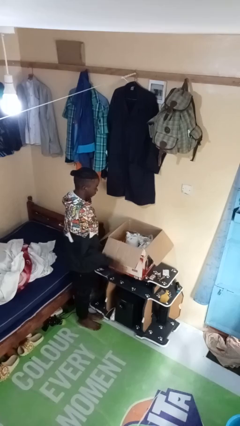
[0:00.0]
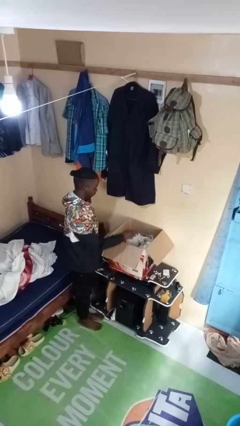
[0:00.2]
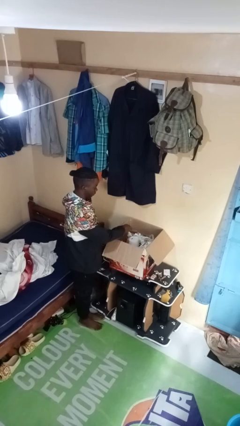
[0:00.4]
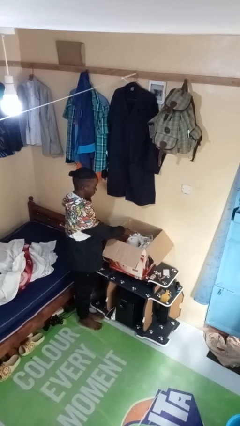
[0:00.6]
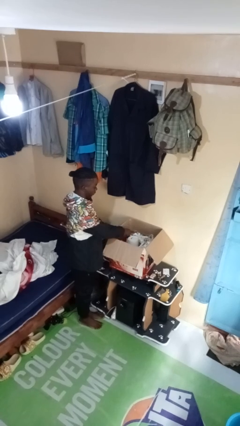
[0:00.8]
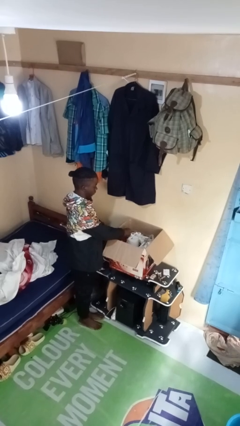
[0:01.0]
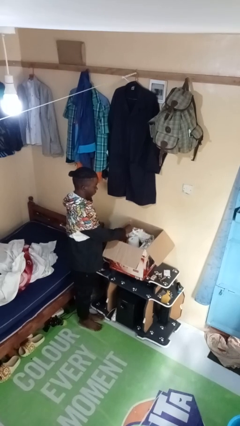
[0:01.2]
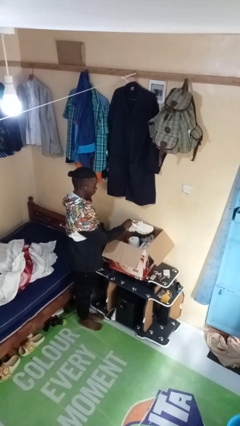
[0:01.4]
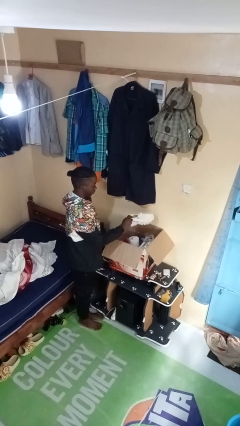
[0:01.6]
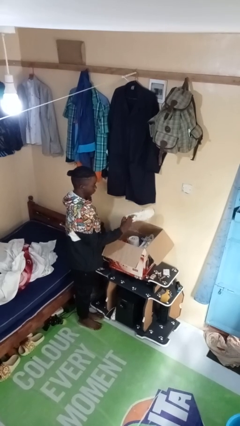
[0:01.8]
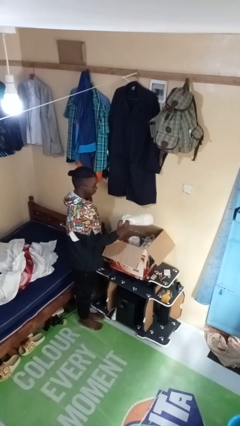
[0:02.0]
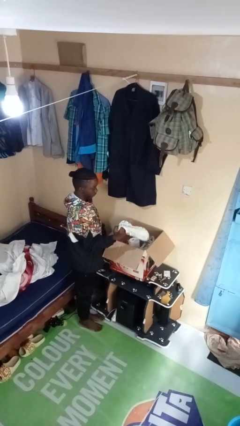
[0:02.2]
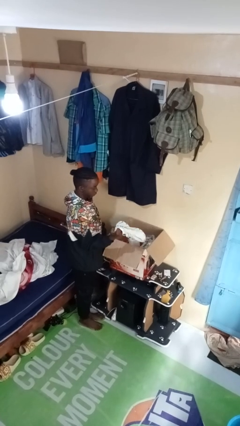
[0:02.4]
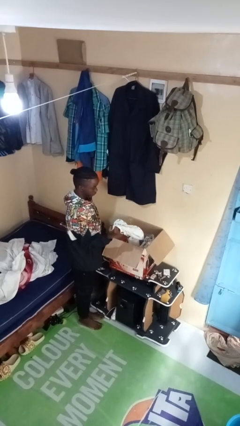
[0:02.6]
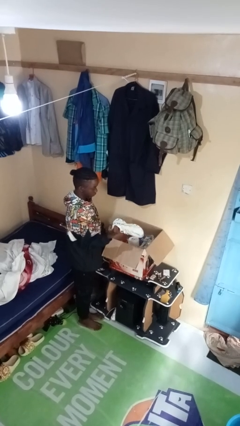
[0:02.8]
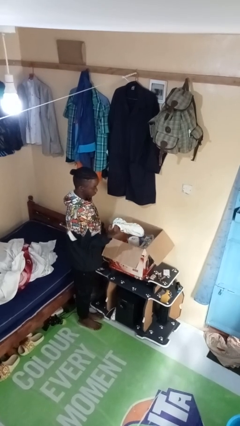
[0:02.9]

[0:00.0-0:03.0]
person takes object from box

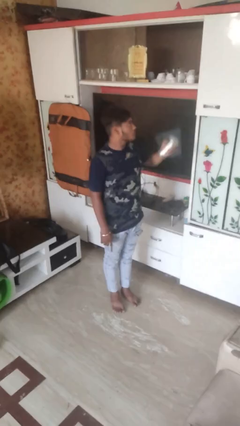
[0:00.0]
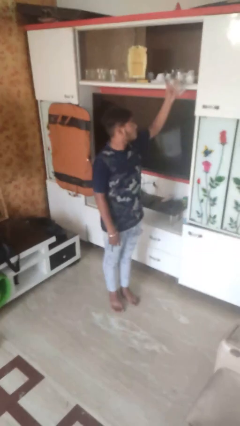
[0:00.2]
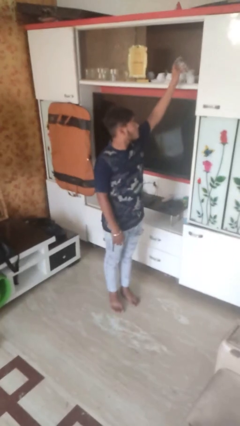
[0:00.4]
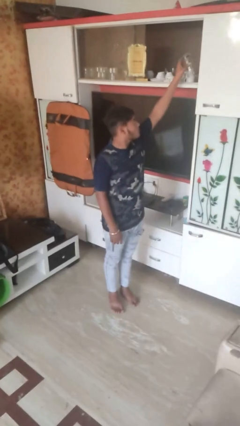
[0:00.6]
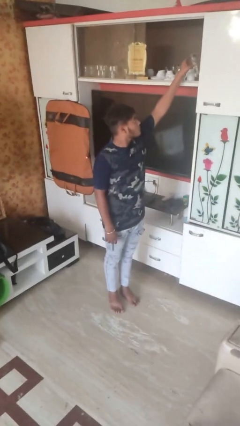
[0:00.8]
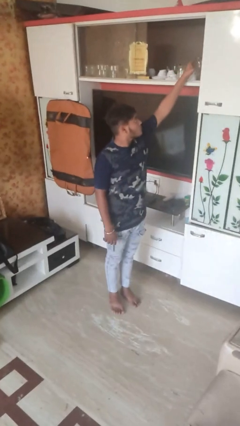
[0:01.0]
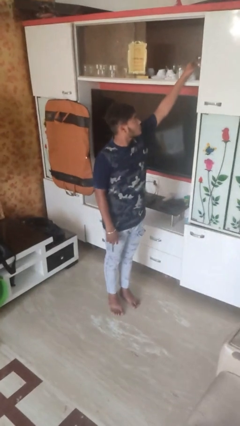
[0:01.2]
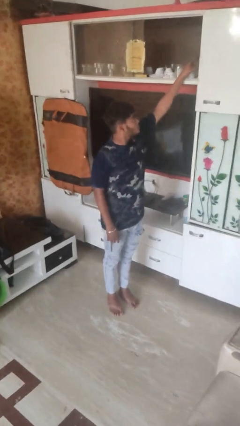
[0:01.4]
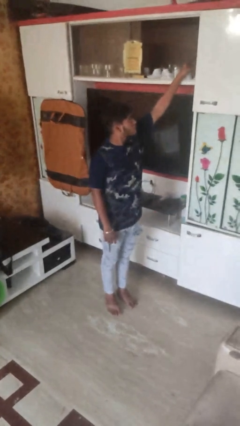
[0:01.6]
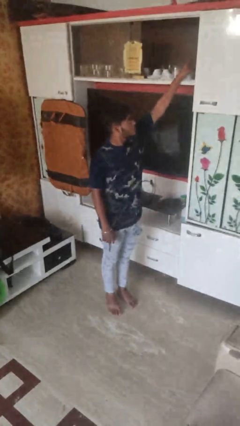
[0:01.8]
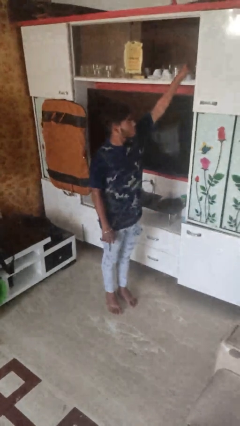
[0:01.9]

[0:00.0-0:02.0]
person puts object in cabinet

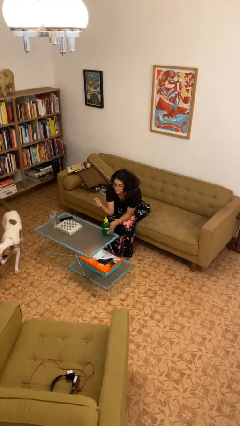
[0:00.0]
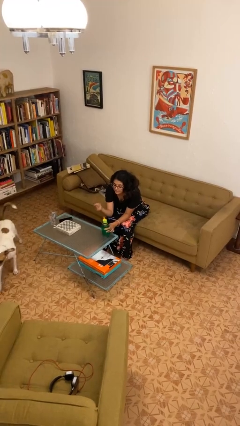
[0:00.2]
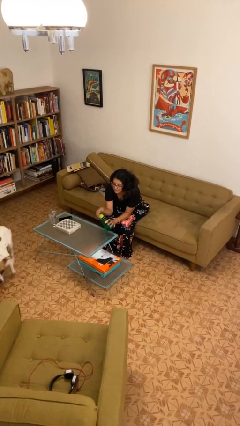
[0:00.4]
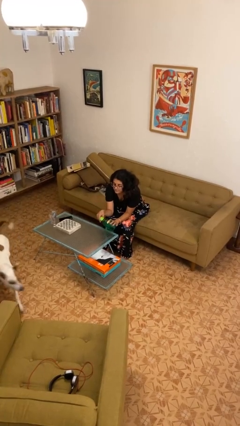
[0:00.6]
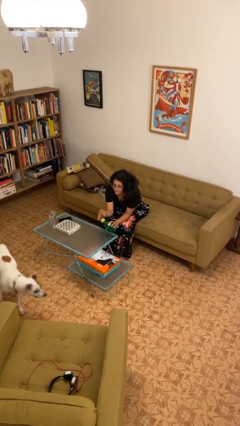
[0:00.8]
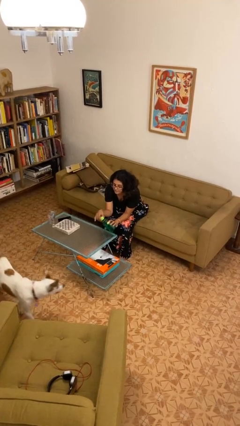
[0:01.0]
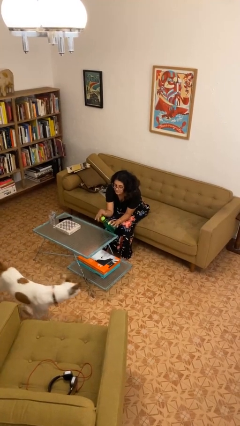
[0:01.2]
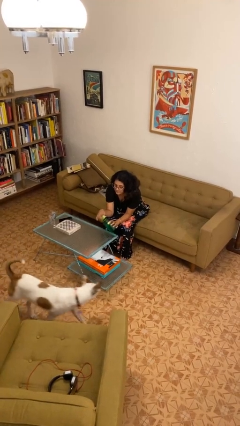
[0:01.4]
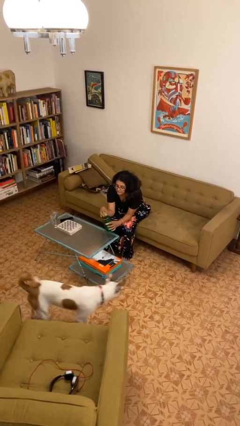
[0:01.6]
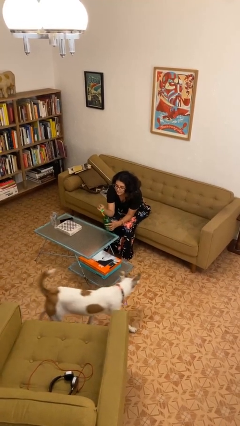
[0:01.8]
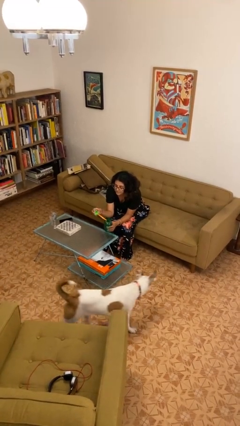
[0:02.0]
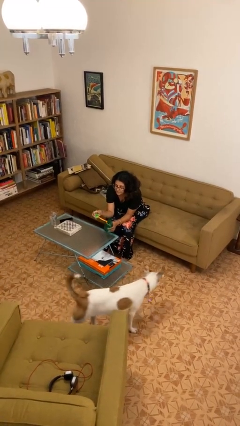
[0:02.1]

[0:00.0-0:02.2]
person unscrews lid from bottle

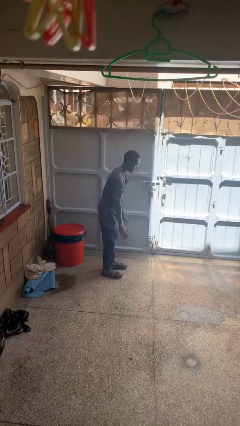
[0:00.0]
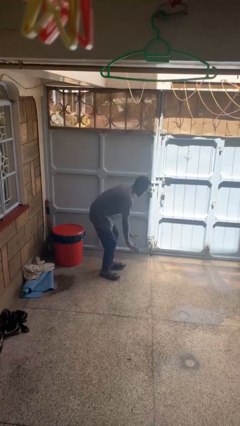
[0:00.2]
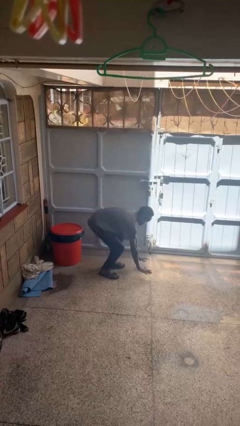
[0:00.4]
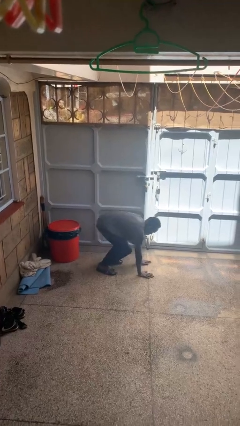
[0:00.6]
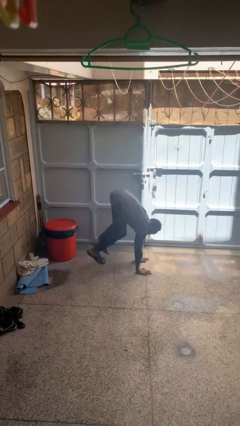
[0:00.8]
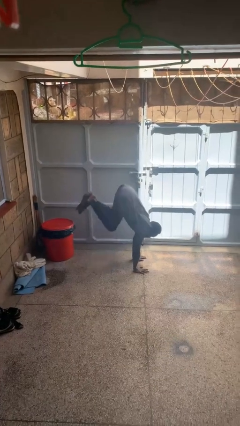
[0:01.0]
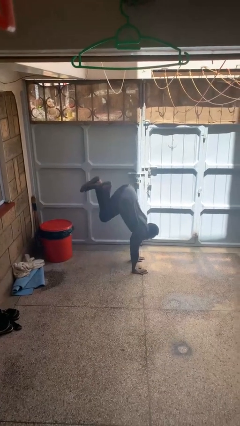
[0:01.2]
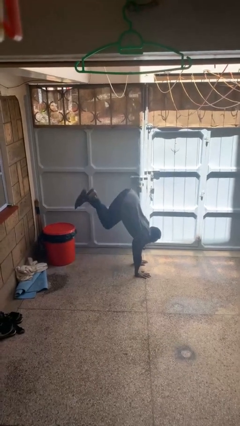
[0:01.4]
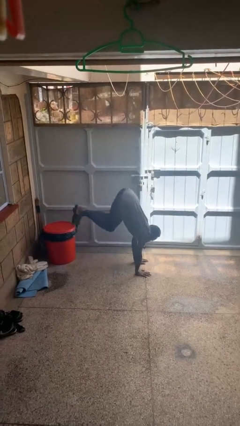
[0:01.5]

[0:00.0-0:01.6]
person handstand

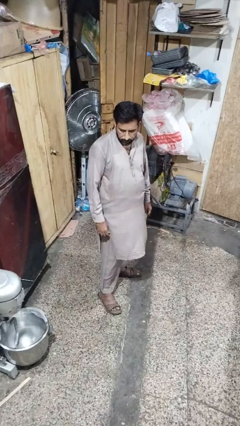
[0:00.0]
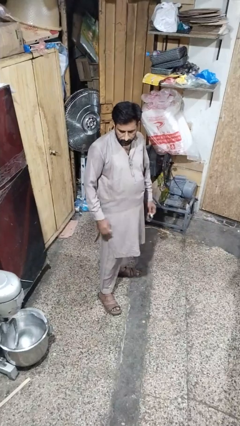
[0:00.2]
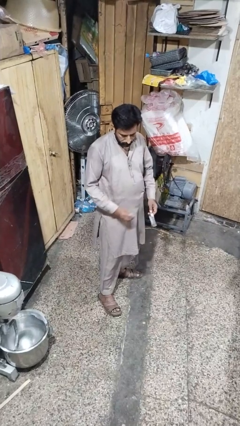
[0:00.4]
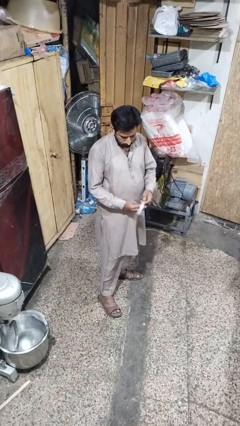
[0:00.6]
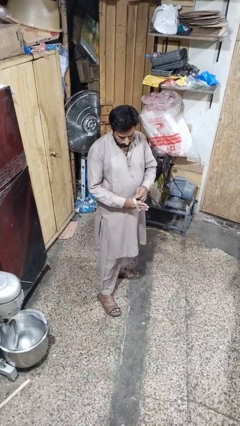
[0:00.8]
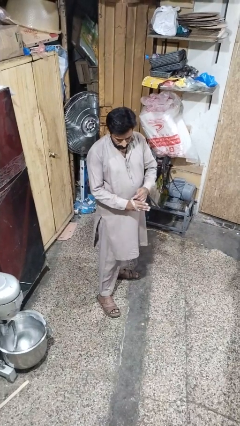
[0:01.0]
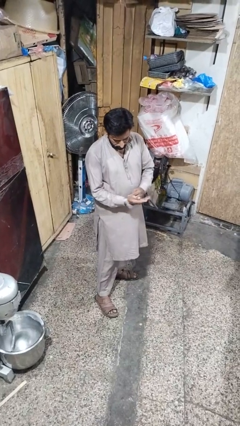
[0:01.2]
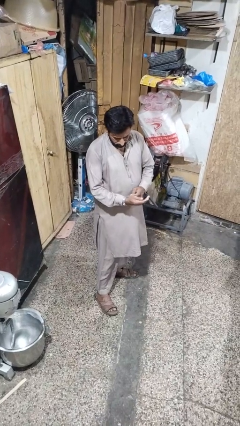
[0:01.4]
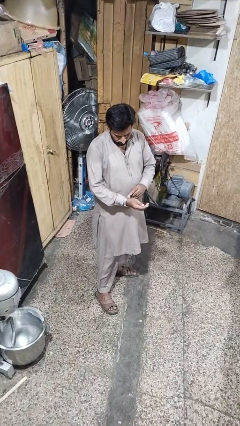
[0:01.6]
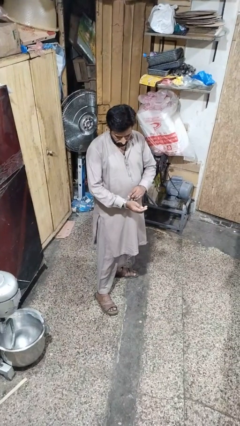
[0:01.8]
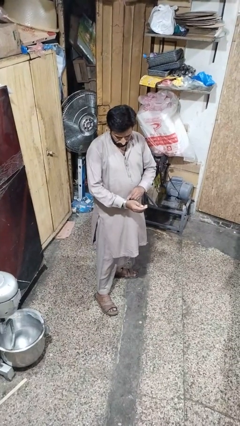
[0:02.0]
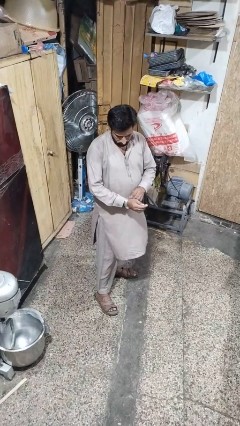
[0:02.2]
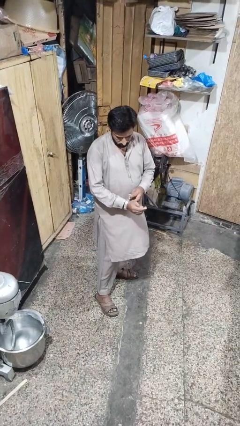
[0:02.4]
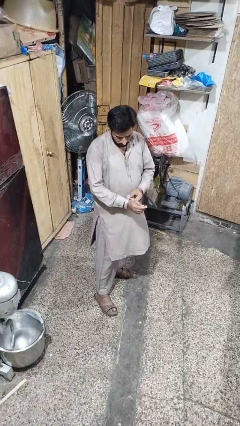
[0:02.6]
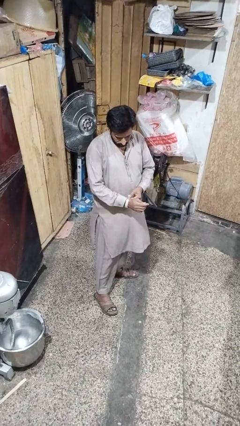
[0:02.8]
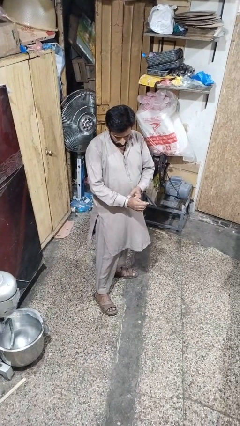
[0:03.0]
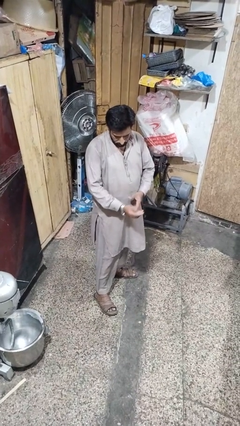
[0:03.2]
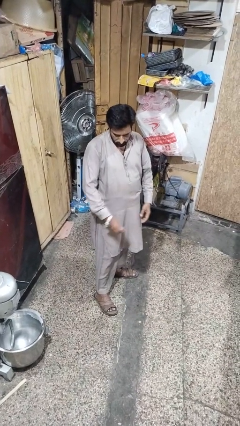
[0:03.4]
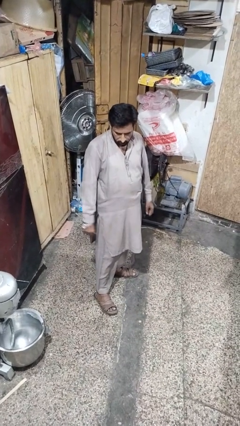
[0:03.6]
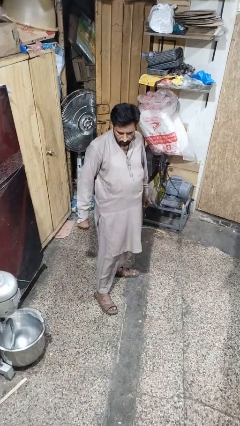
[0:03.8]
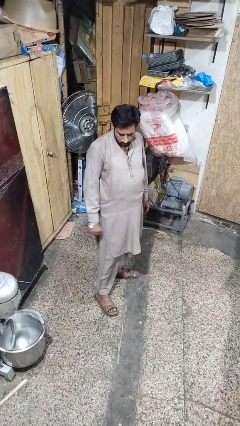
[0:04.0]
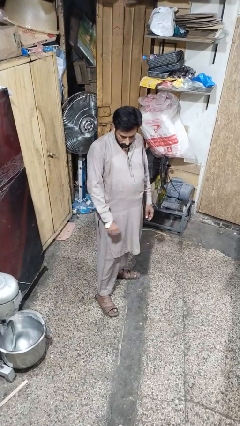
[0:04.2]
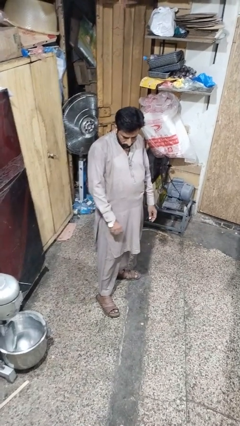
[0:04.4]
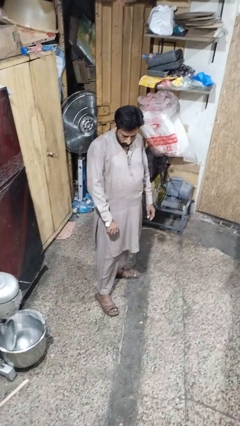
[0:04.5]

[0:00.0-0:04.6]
person puts on wristwatch

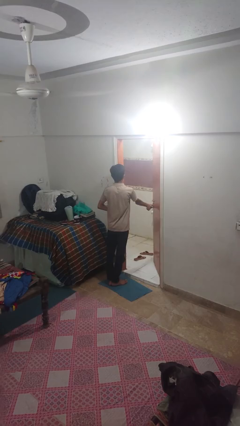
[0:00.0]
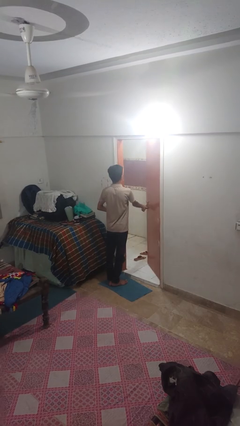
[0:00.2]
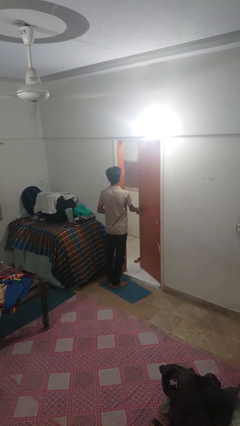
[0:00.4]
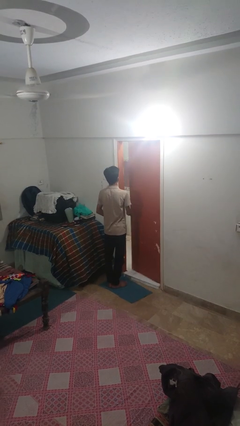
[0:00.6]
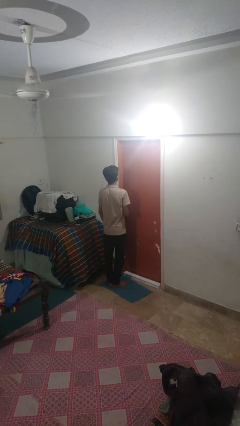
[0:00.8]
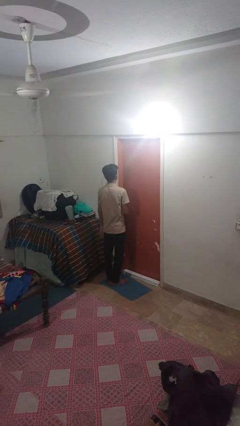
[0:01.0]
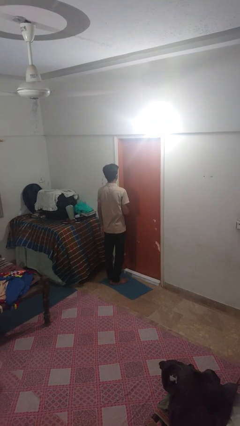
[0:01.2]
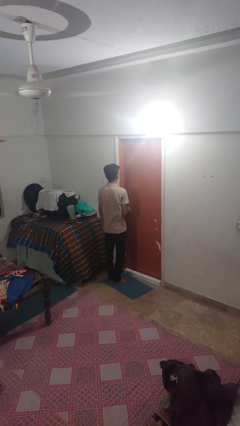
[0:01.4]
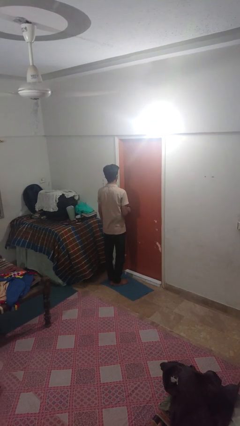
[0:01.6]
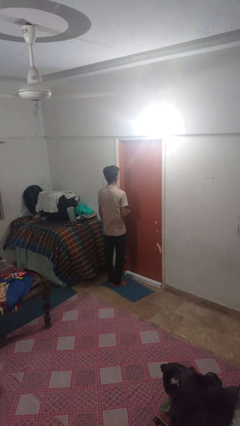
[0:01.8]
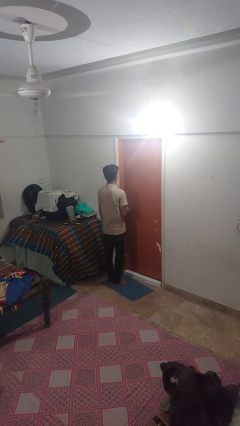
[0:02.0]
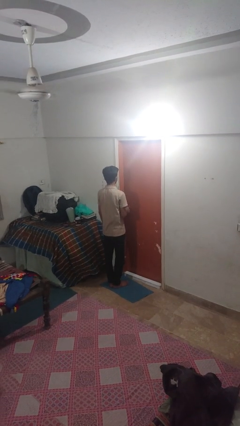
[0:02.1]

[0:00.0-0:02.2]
person closes facility door

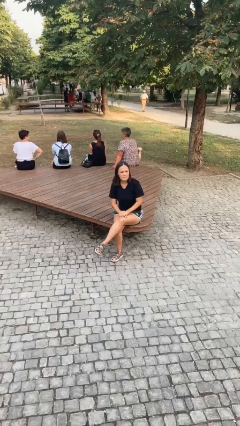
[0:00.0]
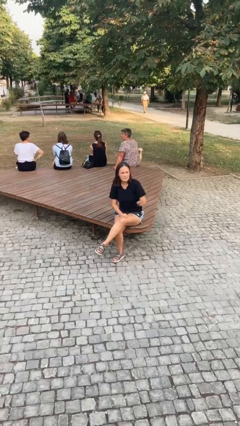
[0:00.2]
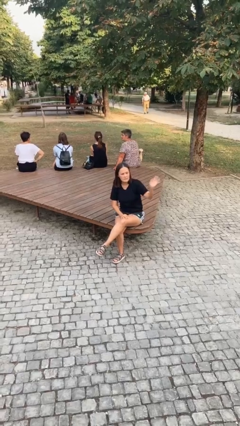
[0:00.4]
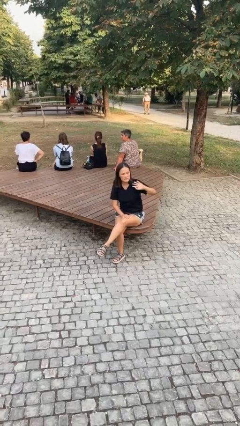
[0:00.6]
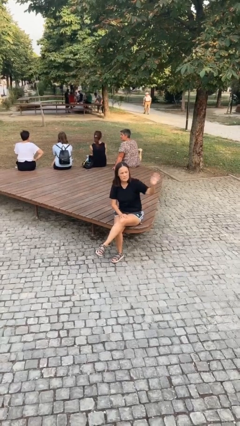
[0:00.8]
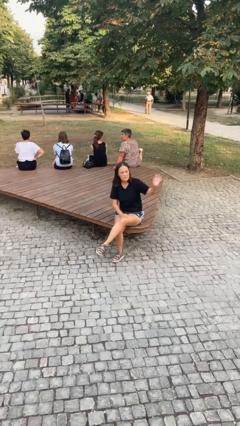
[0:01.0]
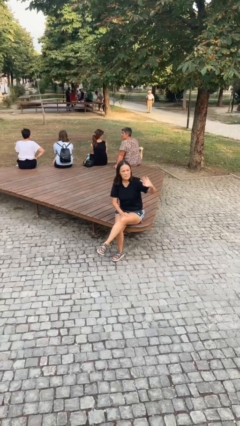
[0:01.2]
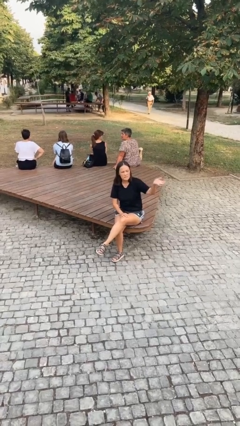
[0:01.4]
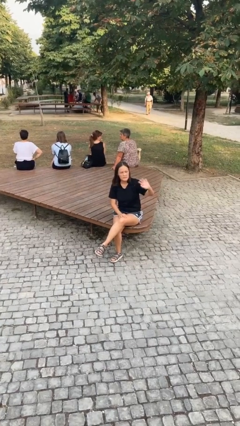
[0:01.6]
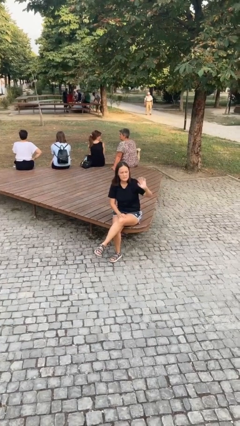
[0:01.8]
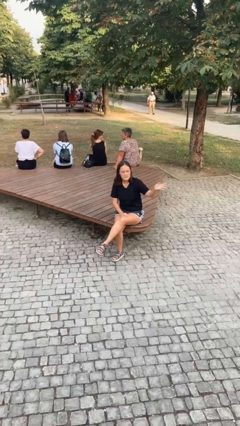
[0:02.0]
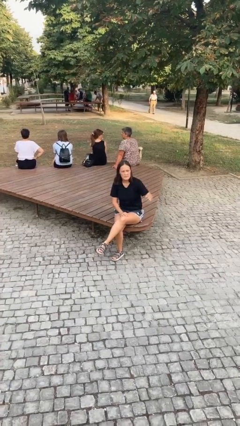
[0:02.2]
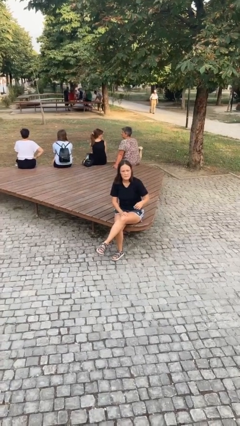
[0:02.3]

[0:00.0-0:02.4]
person waves at person
